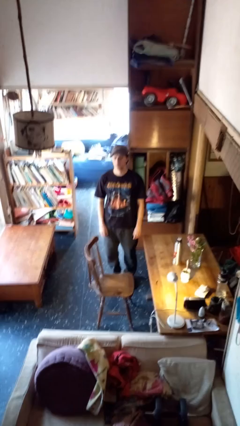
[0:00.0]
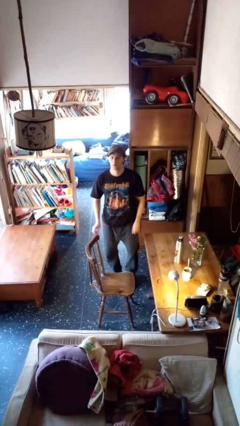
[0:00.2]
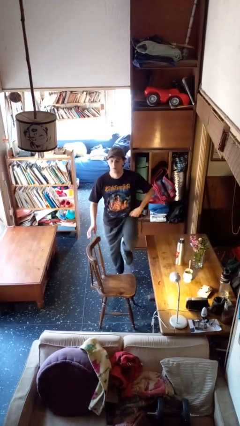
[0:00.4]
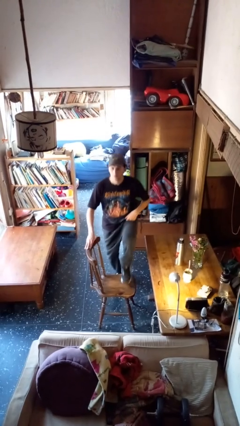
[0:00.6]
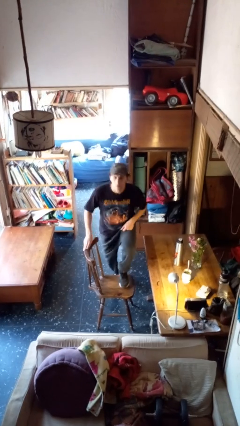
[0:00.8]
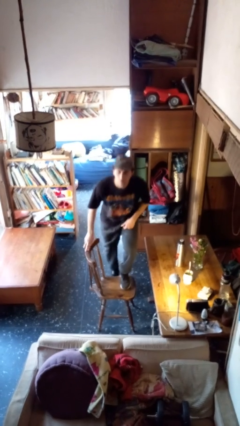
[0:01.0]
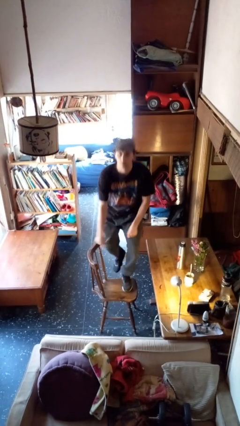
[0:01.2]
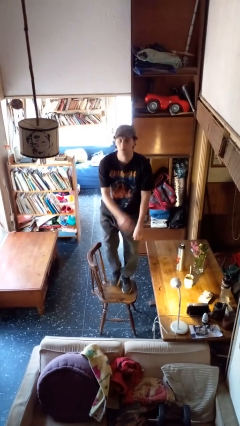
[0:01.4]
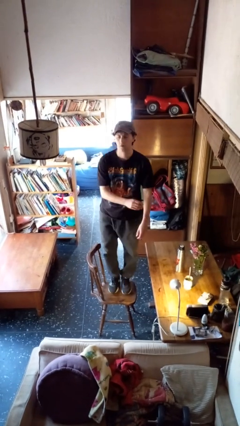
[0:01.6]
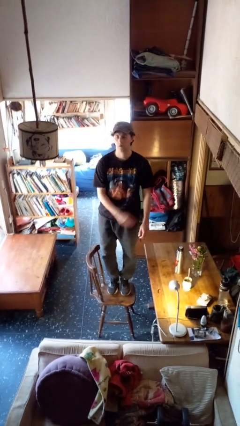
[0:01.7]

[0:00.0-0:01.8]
person climbs on chair

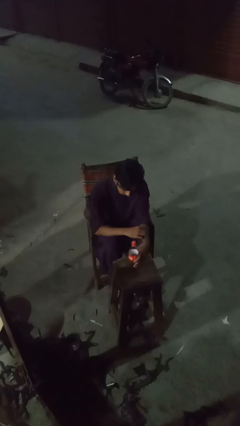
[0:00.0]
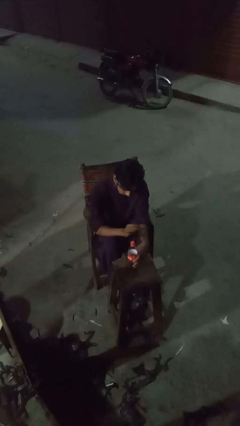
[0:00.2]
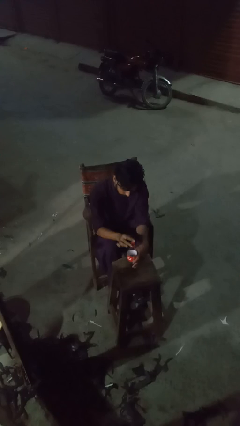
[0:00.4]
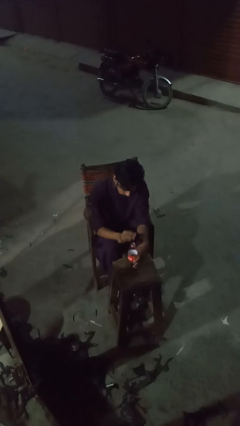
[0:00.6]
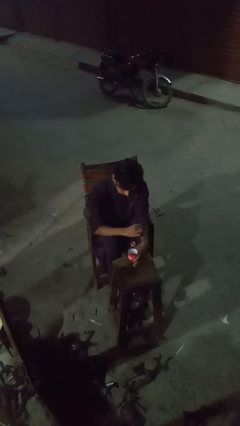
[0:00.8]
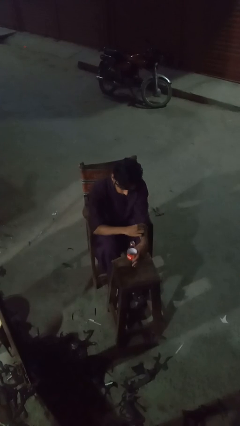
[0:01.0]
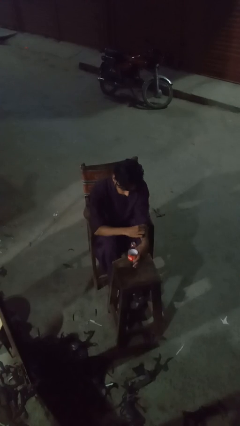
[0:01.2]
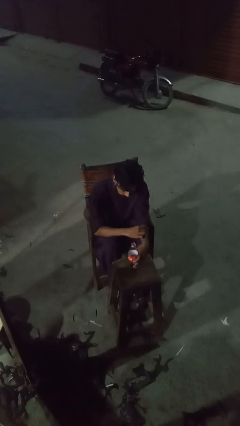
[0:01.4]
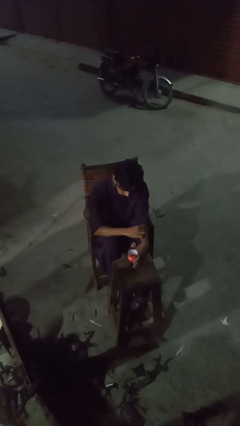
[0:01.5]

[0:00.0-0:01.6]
person unscrews lid from bottle

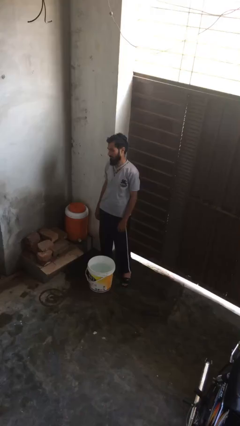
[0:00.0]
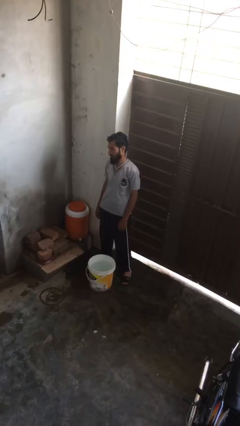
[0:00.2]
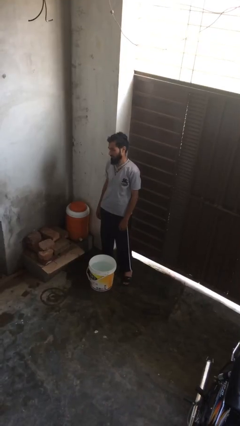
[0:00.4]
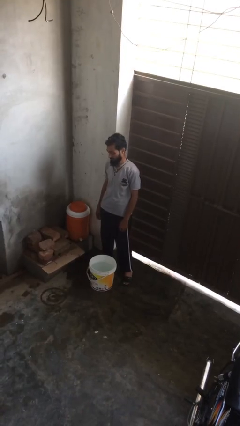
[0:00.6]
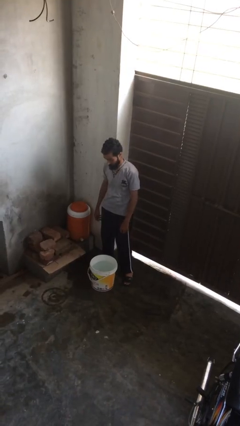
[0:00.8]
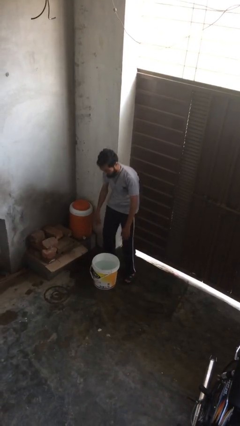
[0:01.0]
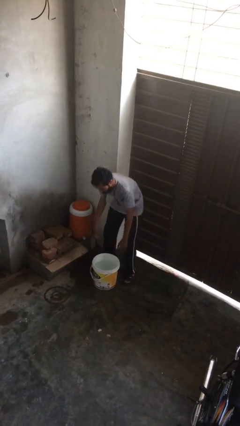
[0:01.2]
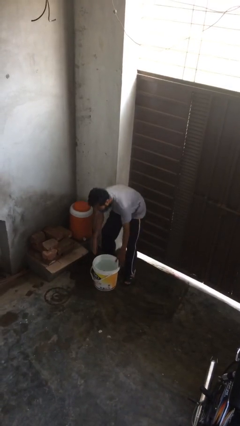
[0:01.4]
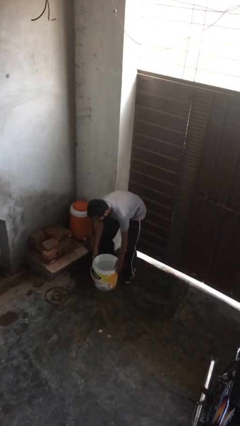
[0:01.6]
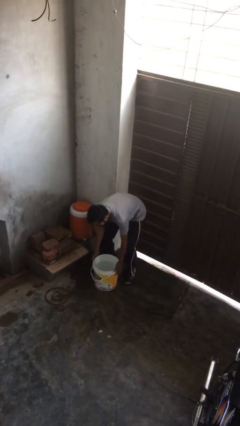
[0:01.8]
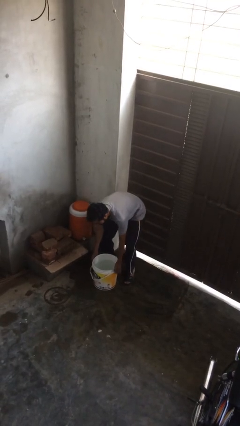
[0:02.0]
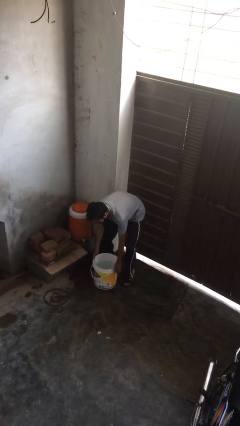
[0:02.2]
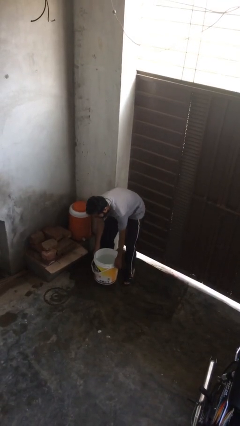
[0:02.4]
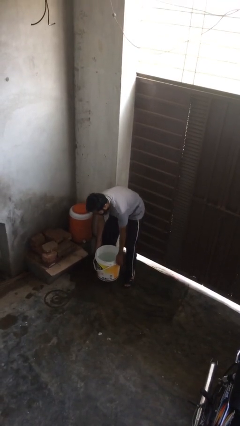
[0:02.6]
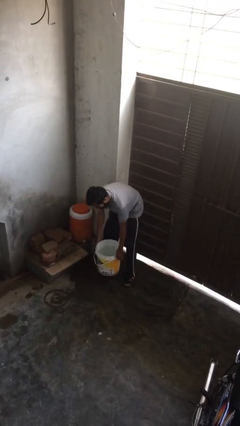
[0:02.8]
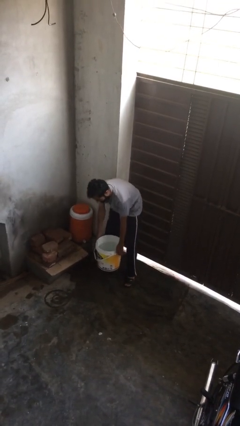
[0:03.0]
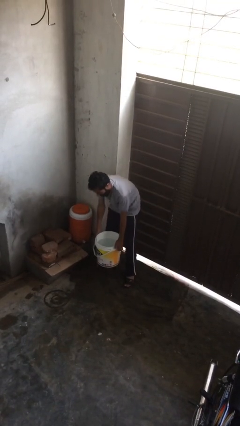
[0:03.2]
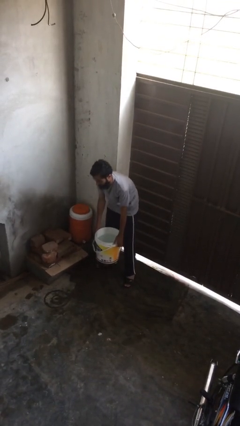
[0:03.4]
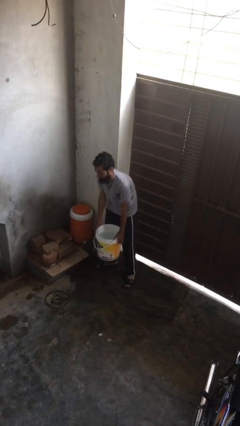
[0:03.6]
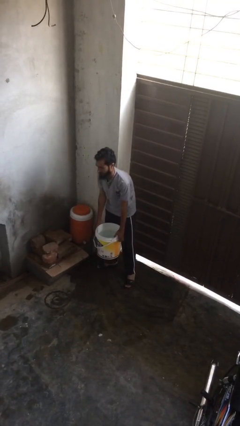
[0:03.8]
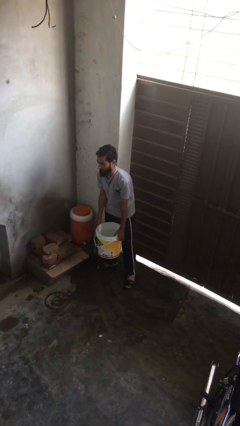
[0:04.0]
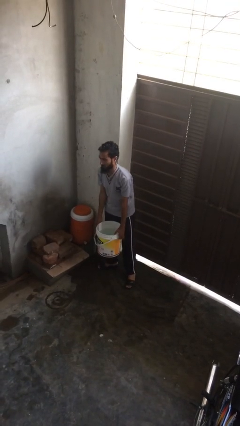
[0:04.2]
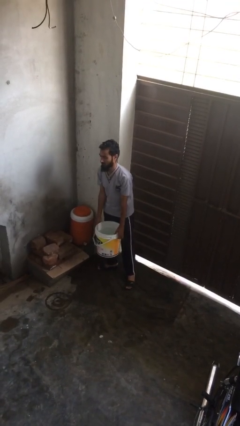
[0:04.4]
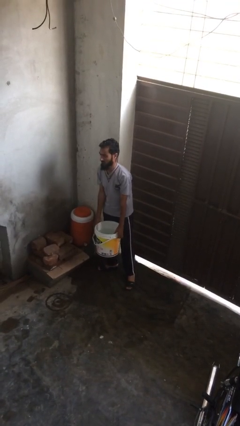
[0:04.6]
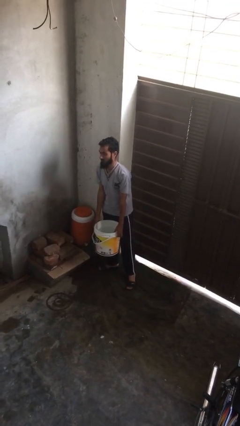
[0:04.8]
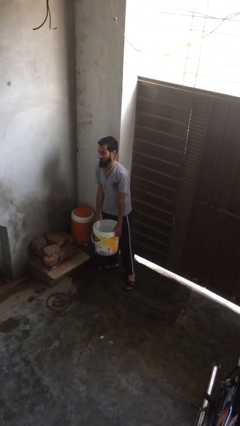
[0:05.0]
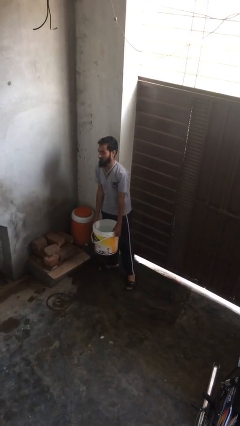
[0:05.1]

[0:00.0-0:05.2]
person picks up object from floor

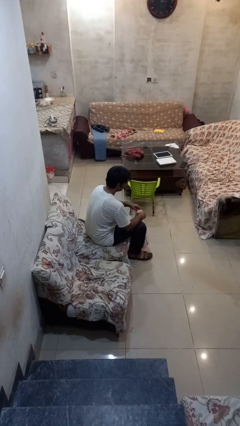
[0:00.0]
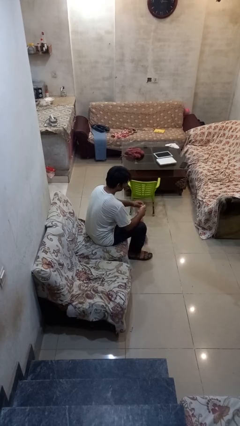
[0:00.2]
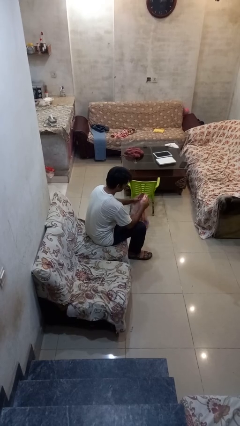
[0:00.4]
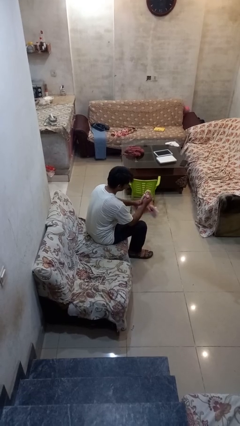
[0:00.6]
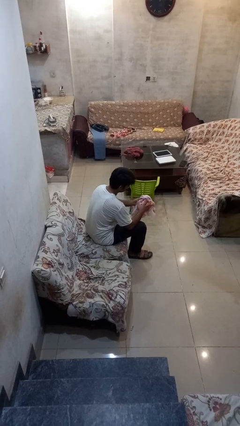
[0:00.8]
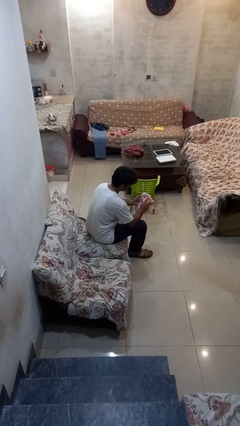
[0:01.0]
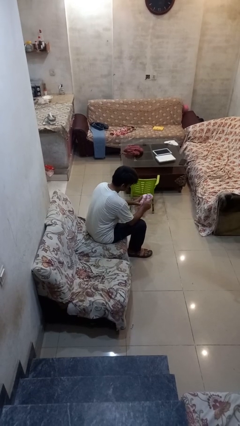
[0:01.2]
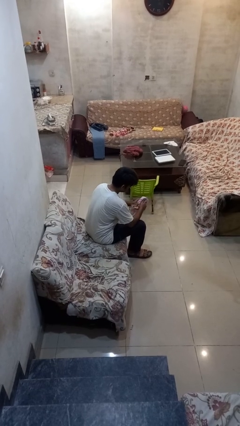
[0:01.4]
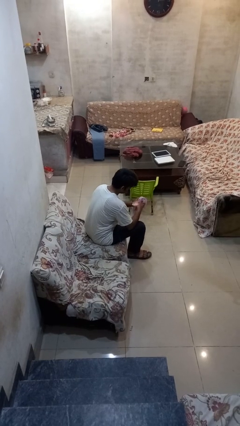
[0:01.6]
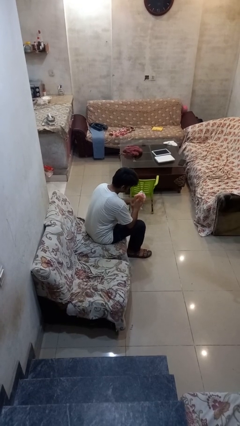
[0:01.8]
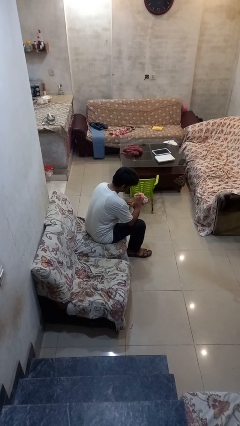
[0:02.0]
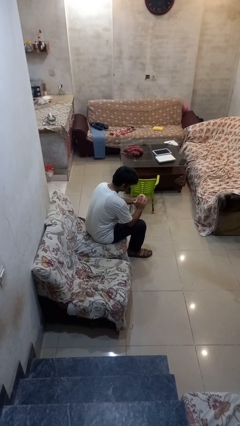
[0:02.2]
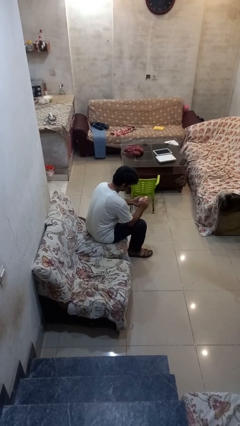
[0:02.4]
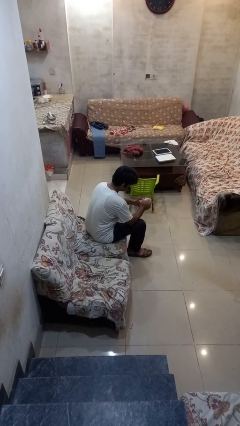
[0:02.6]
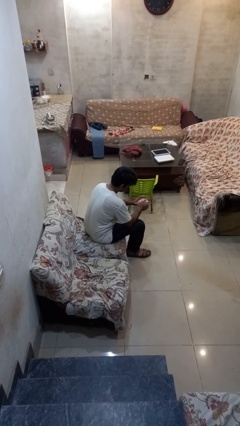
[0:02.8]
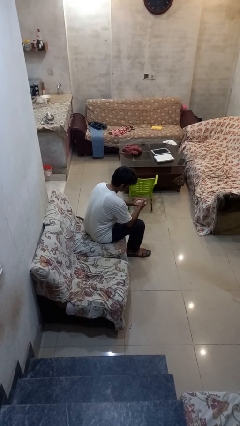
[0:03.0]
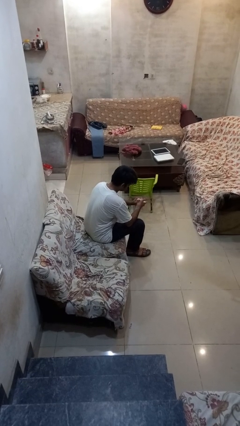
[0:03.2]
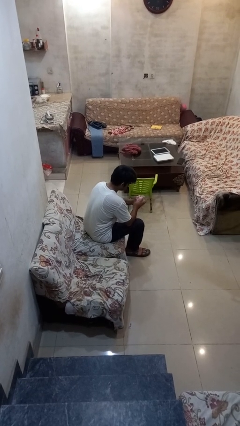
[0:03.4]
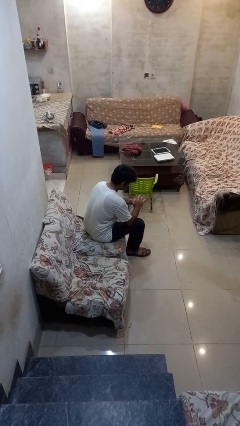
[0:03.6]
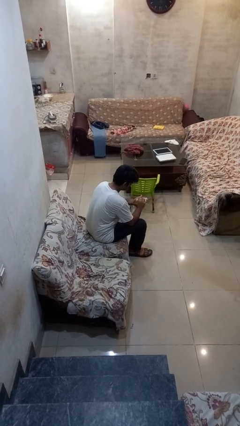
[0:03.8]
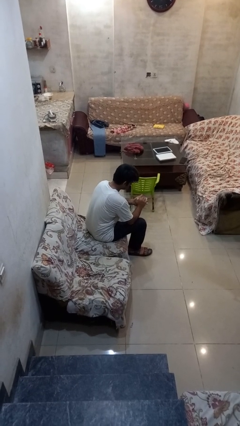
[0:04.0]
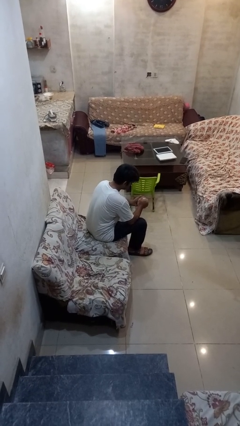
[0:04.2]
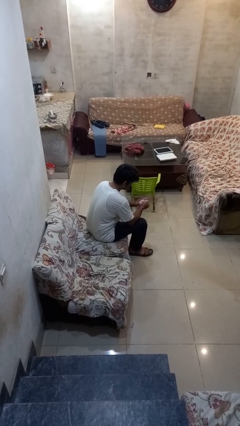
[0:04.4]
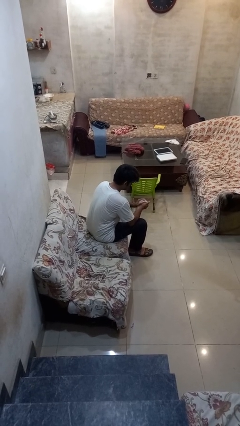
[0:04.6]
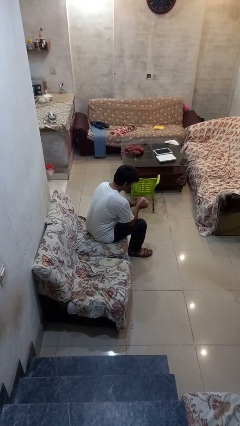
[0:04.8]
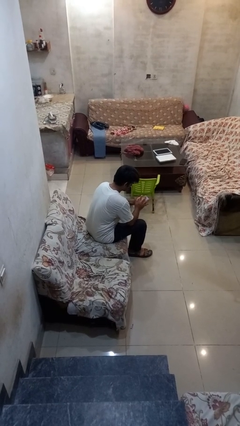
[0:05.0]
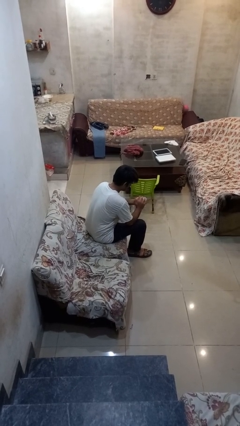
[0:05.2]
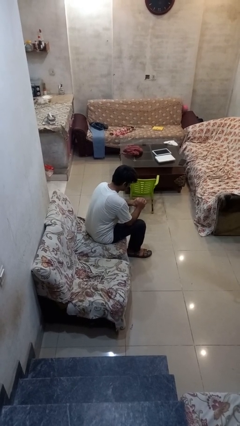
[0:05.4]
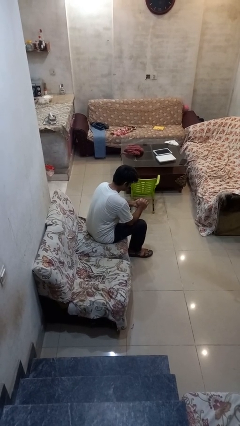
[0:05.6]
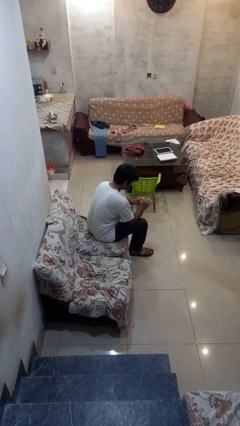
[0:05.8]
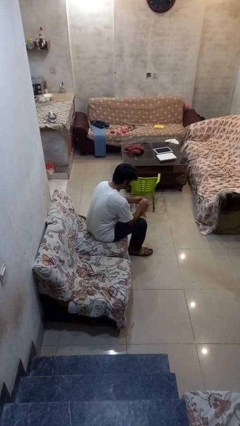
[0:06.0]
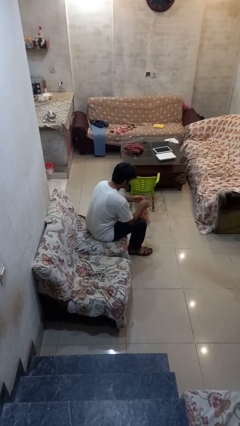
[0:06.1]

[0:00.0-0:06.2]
person squeezes object

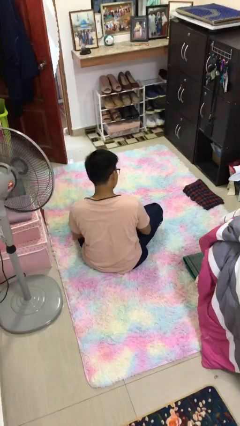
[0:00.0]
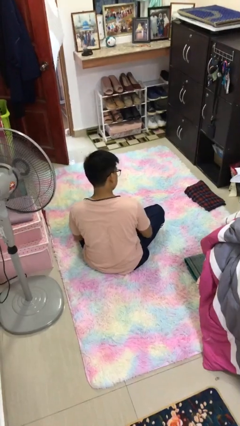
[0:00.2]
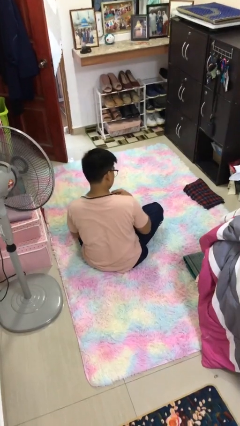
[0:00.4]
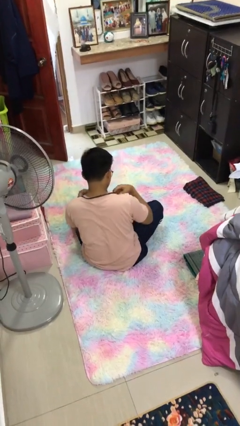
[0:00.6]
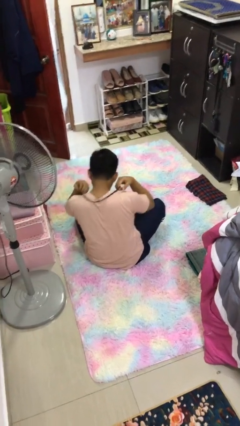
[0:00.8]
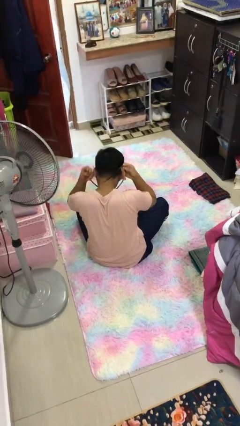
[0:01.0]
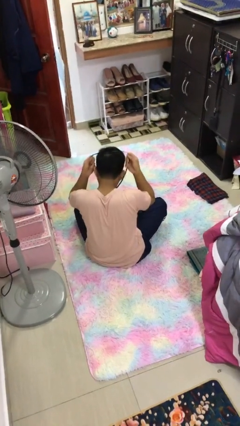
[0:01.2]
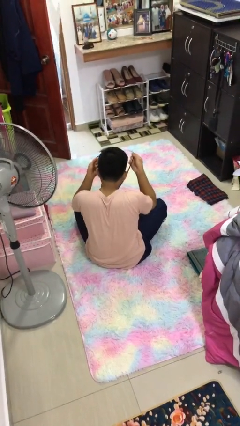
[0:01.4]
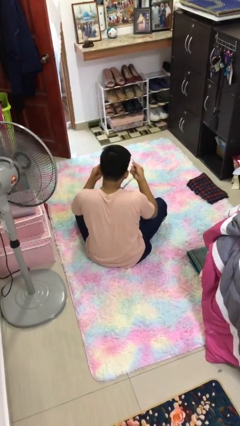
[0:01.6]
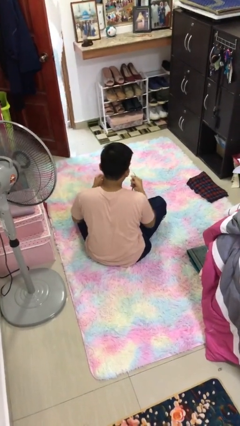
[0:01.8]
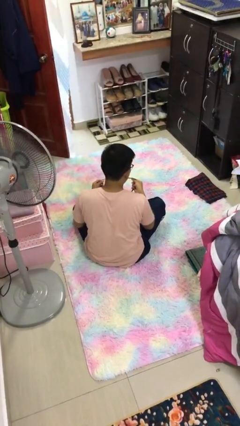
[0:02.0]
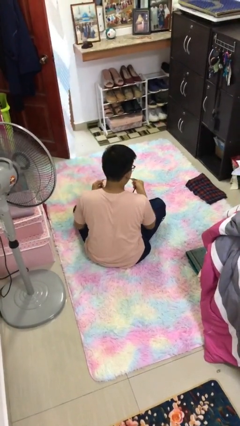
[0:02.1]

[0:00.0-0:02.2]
person takes off necklace

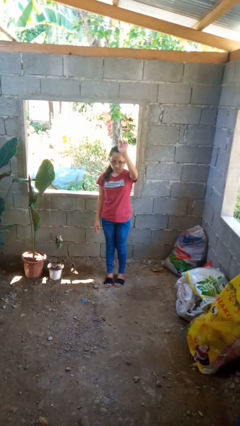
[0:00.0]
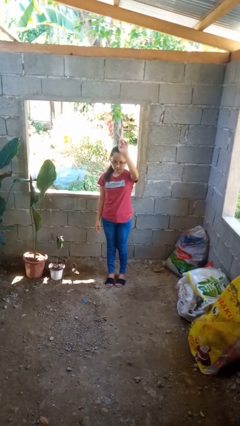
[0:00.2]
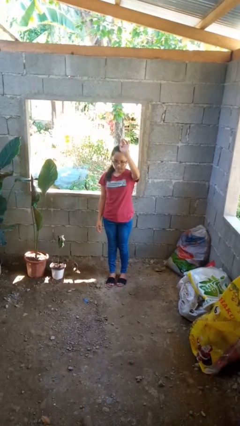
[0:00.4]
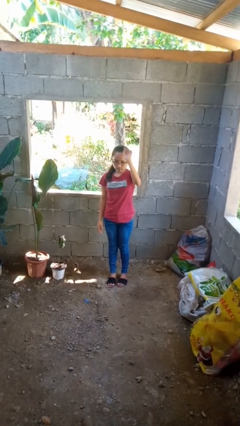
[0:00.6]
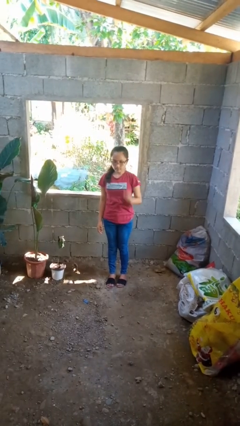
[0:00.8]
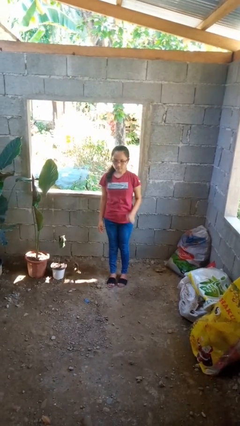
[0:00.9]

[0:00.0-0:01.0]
person gestures lower hand
